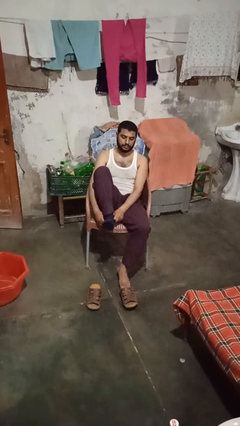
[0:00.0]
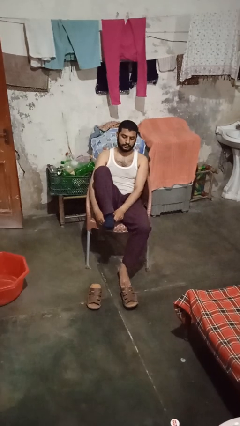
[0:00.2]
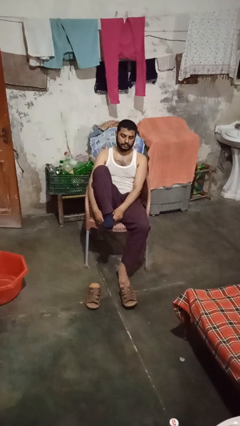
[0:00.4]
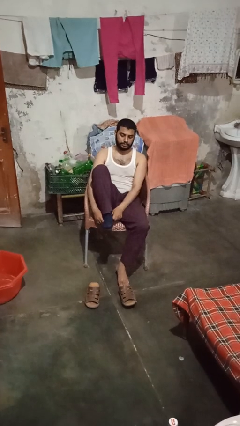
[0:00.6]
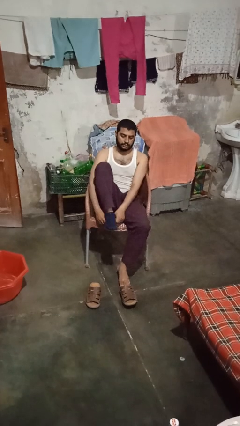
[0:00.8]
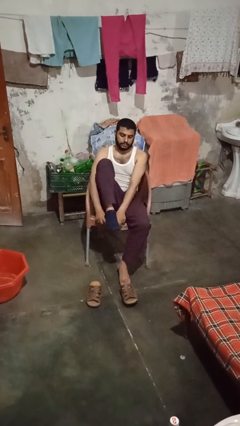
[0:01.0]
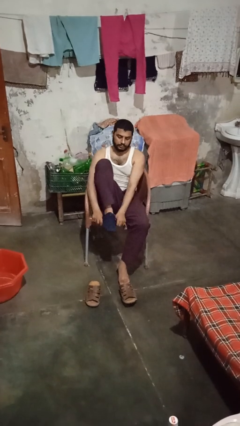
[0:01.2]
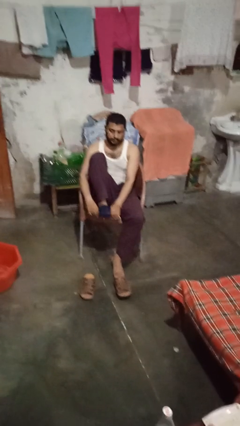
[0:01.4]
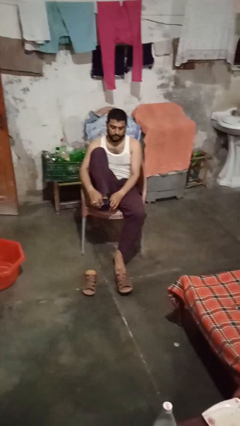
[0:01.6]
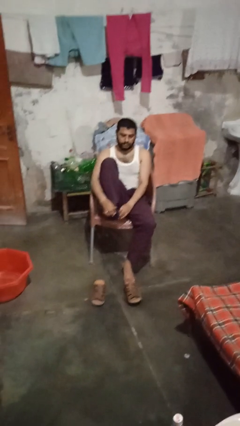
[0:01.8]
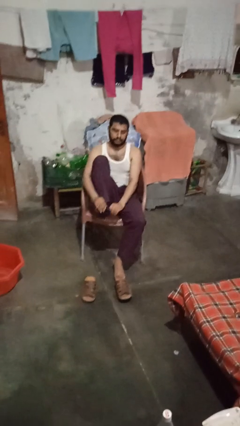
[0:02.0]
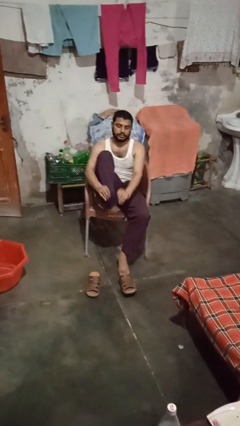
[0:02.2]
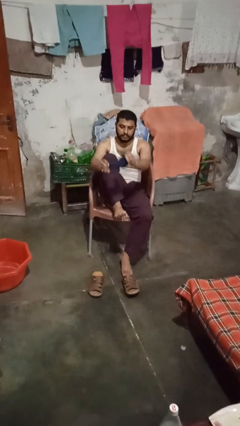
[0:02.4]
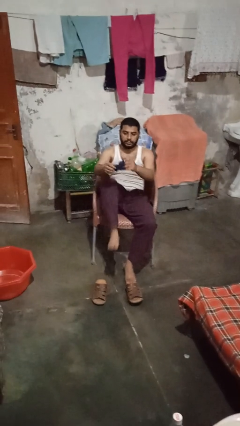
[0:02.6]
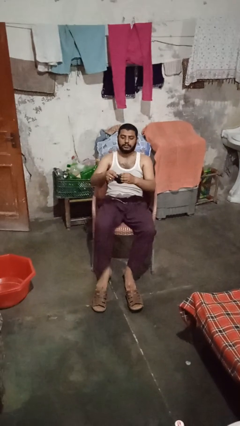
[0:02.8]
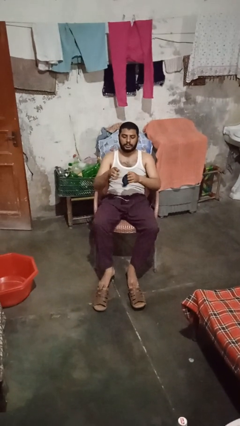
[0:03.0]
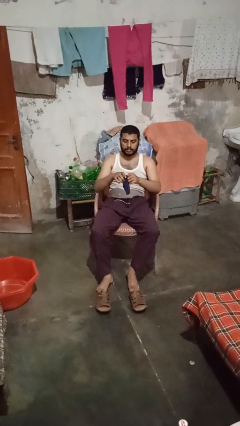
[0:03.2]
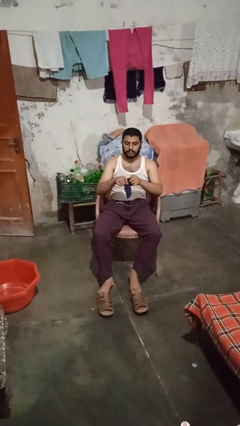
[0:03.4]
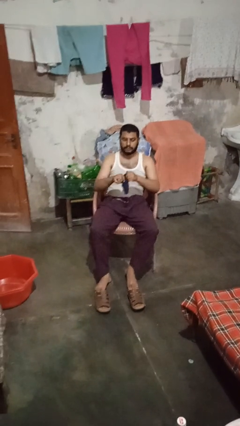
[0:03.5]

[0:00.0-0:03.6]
person takes off socks

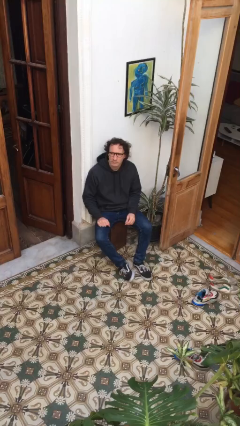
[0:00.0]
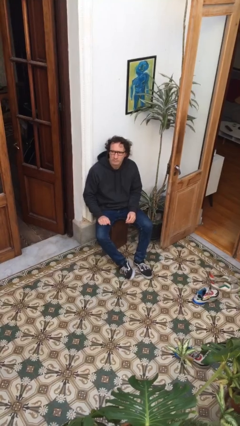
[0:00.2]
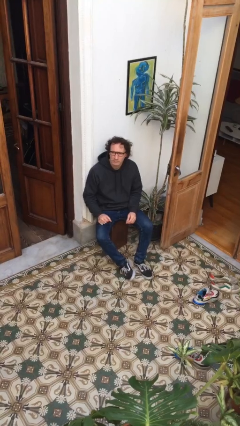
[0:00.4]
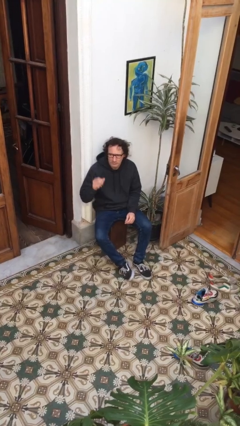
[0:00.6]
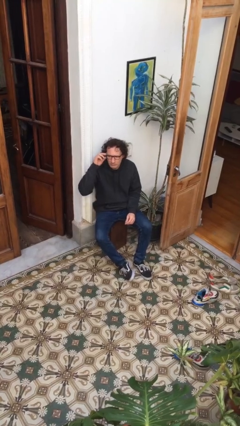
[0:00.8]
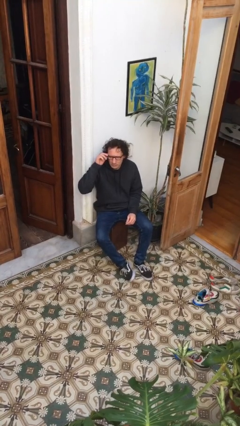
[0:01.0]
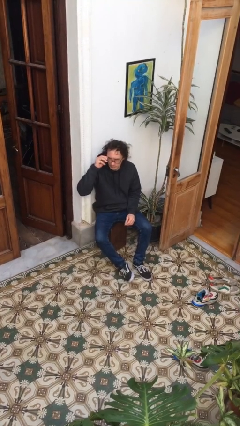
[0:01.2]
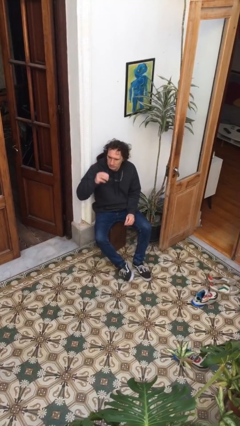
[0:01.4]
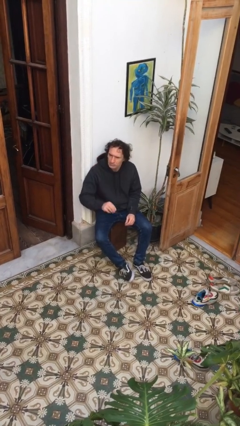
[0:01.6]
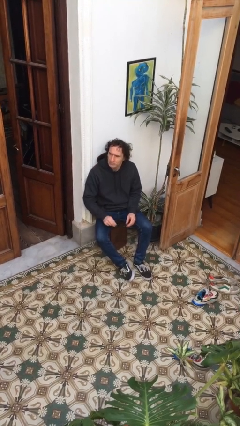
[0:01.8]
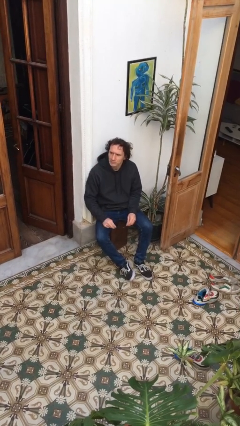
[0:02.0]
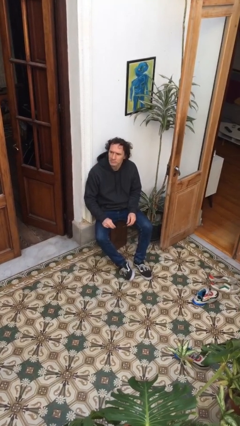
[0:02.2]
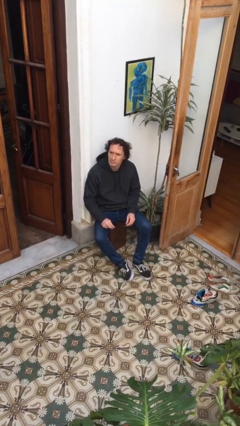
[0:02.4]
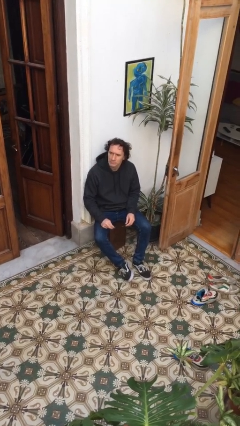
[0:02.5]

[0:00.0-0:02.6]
person takes off glasses

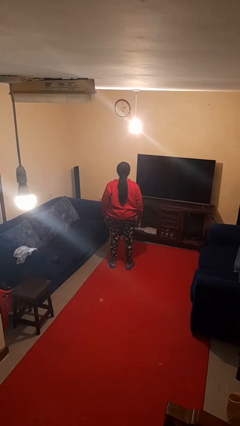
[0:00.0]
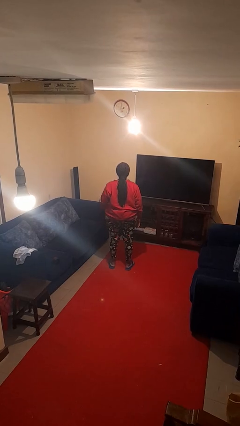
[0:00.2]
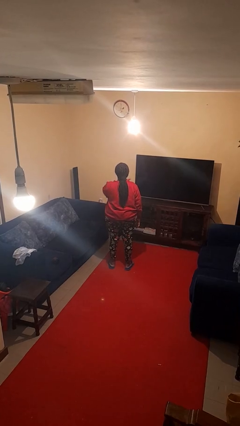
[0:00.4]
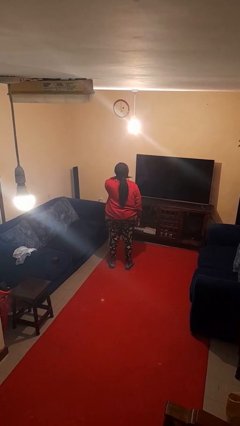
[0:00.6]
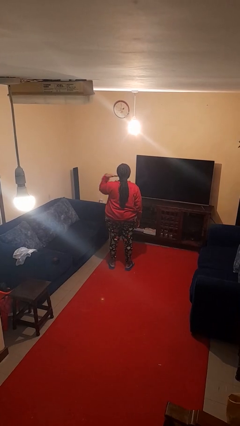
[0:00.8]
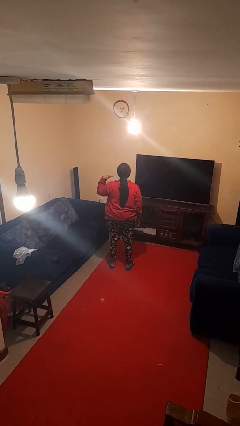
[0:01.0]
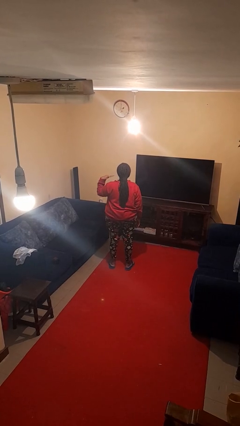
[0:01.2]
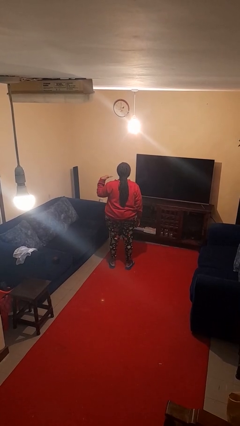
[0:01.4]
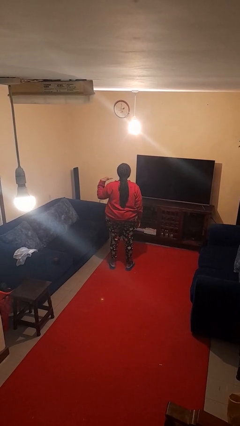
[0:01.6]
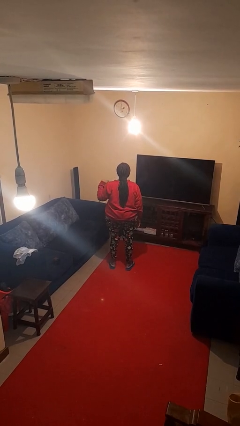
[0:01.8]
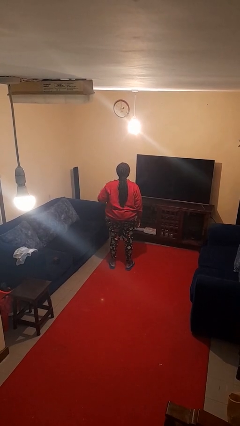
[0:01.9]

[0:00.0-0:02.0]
person gestures cut

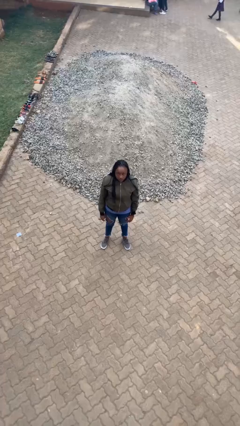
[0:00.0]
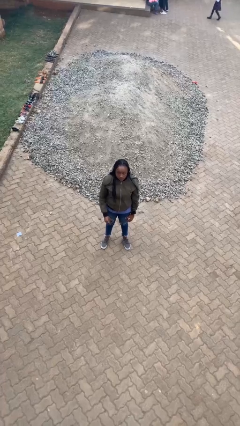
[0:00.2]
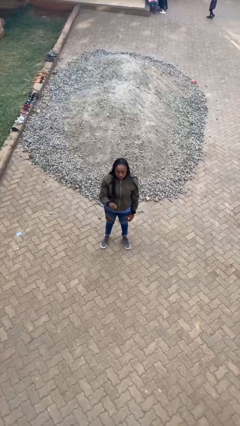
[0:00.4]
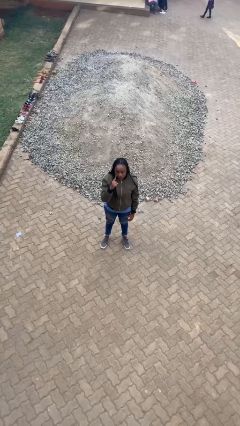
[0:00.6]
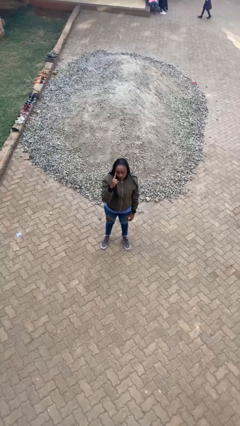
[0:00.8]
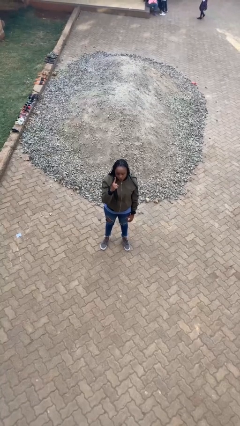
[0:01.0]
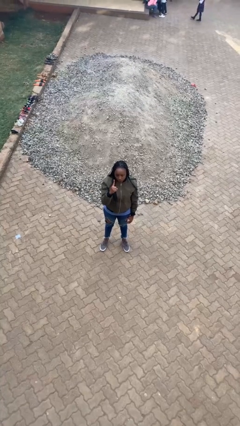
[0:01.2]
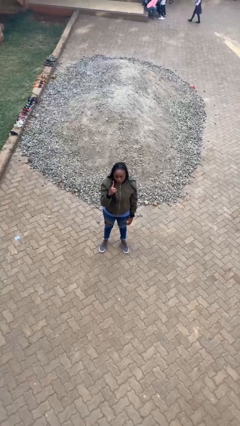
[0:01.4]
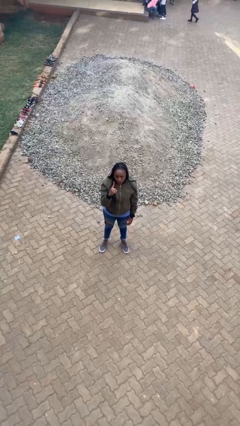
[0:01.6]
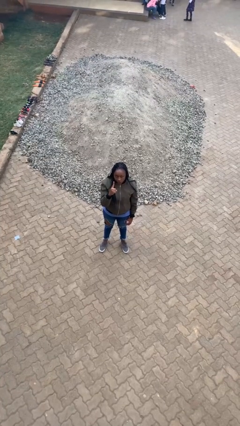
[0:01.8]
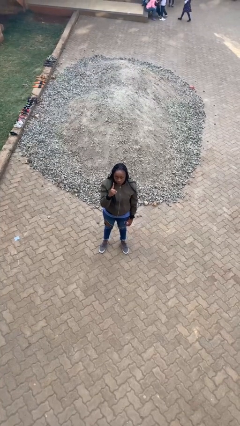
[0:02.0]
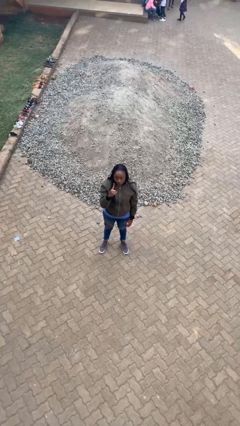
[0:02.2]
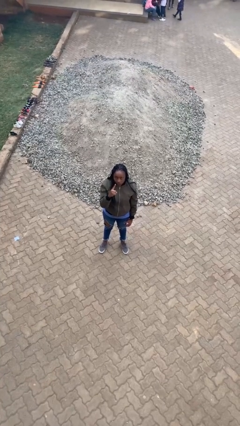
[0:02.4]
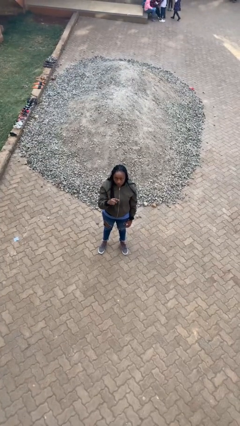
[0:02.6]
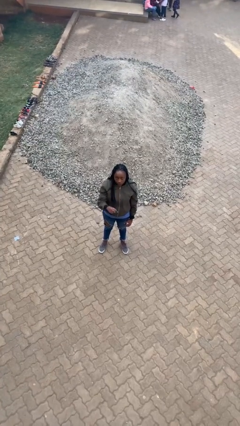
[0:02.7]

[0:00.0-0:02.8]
person gestures number one

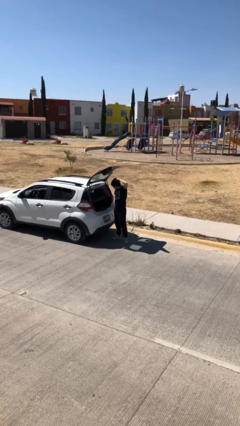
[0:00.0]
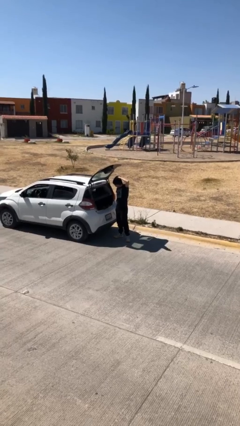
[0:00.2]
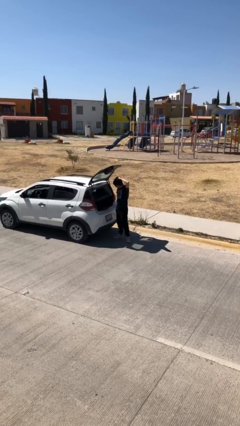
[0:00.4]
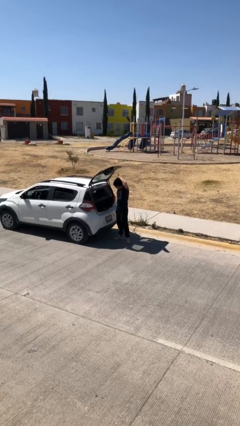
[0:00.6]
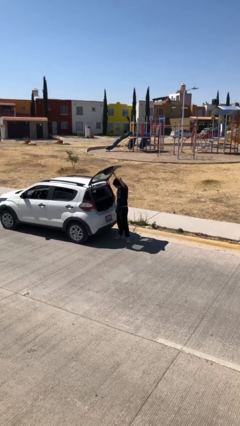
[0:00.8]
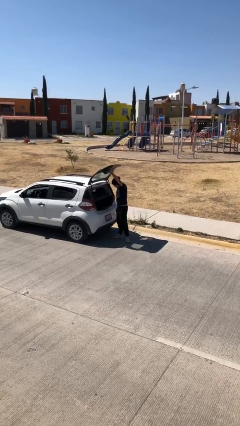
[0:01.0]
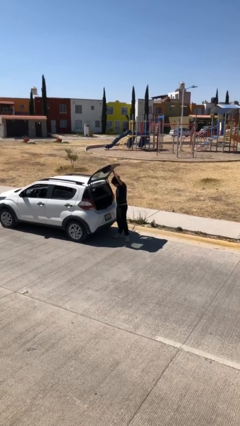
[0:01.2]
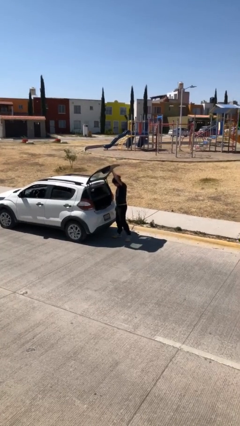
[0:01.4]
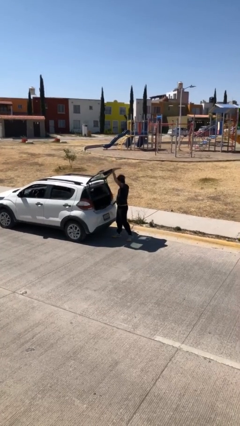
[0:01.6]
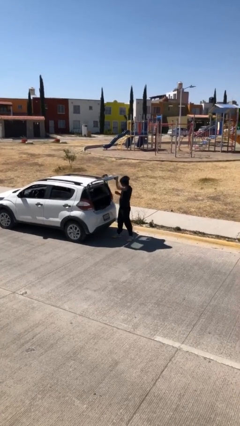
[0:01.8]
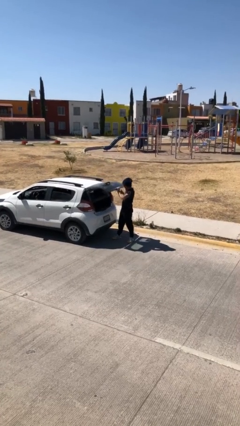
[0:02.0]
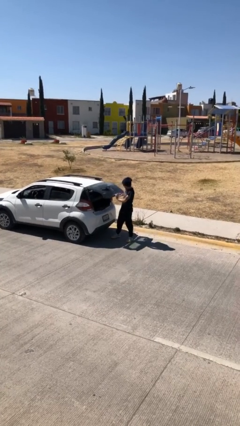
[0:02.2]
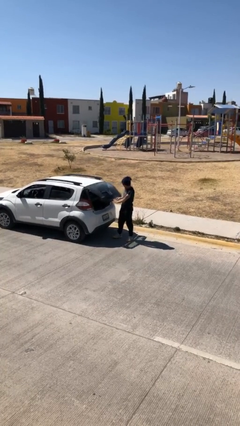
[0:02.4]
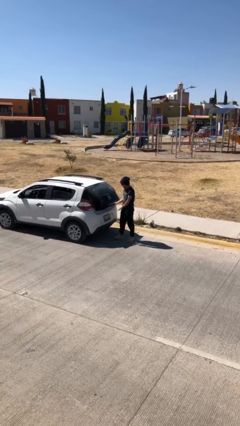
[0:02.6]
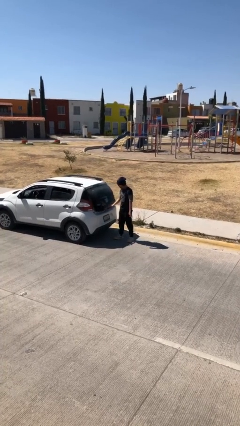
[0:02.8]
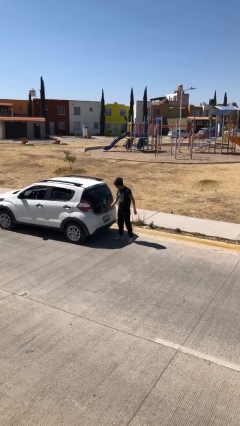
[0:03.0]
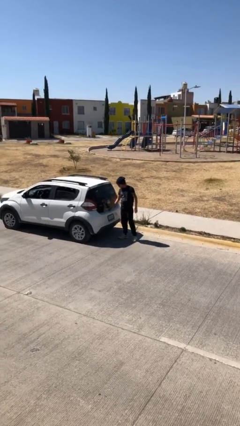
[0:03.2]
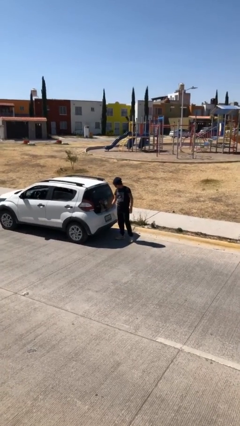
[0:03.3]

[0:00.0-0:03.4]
person closes car trunk

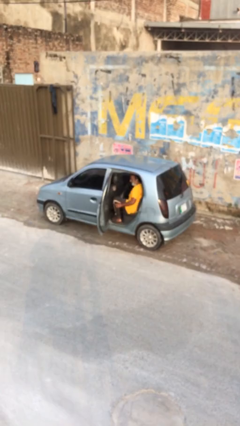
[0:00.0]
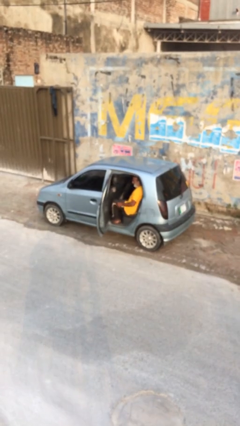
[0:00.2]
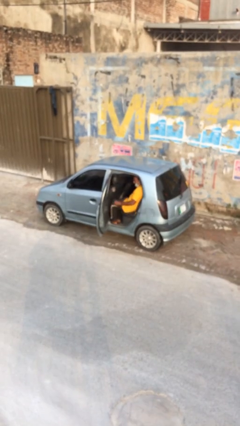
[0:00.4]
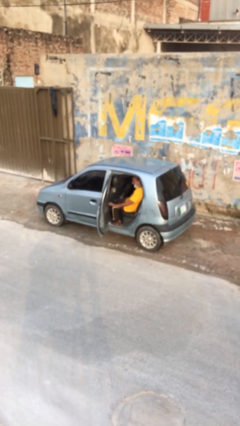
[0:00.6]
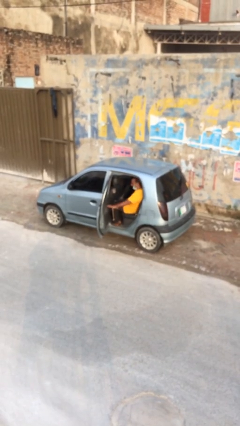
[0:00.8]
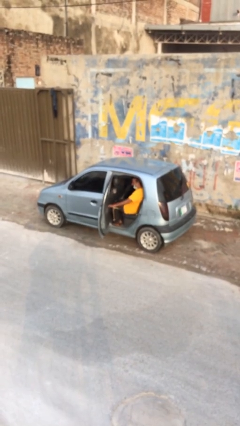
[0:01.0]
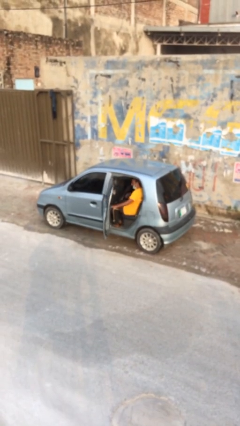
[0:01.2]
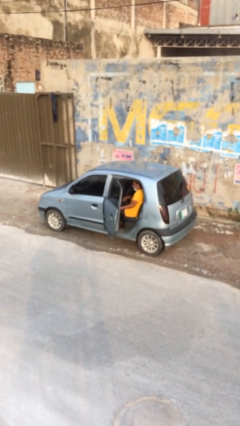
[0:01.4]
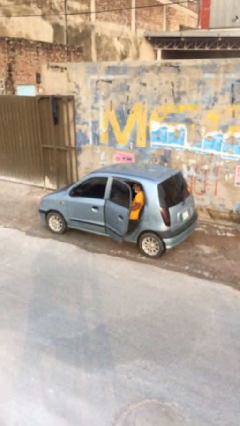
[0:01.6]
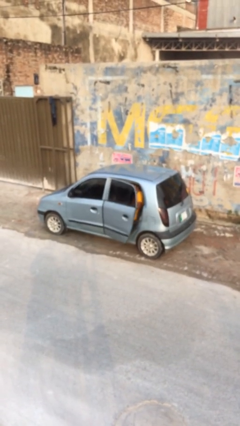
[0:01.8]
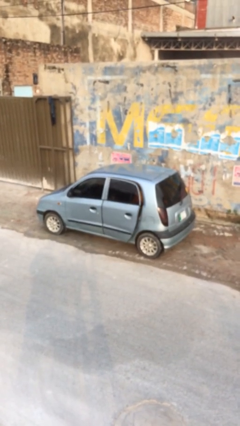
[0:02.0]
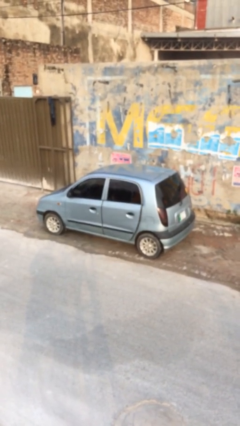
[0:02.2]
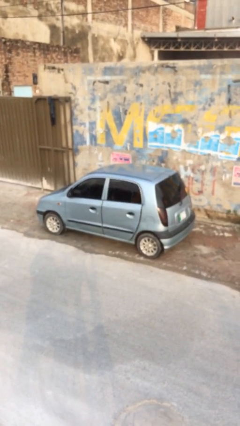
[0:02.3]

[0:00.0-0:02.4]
person closes car door

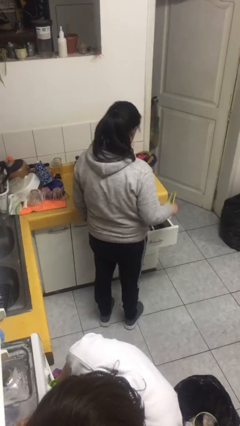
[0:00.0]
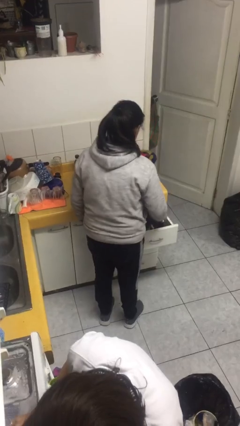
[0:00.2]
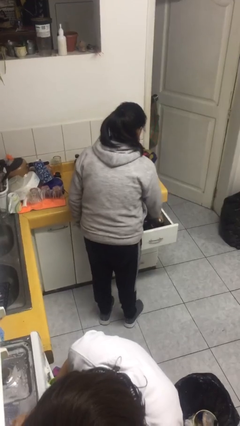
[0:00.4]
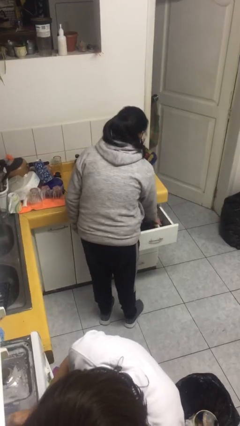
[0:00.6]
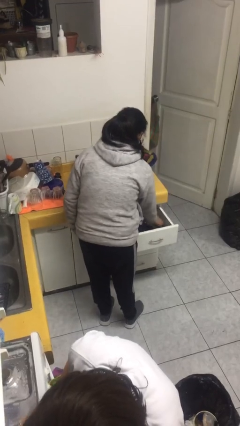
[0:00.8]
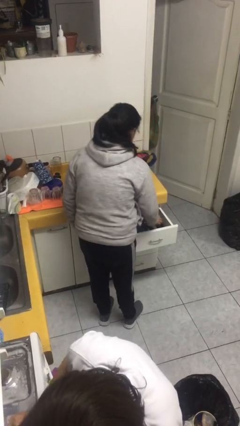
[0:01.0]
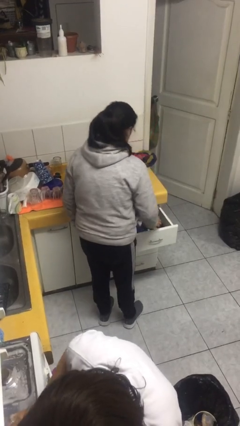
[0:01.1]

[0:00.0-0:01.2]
person puts object into kitchen drawer
